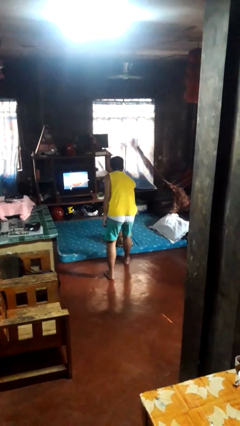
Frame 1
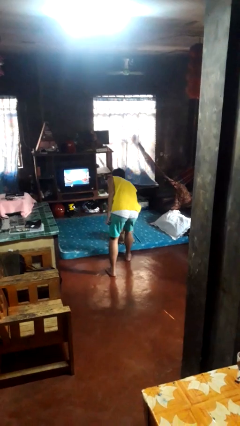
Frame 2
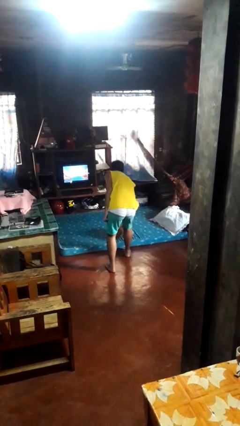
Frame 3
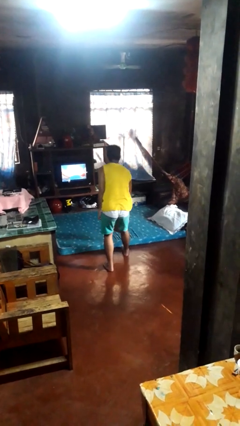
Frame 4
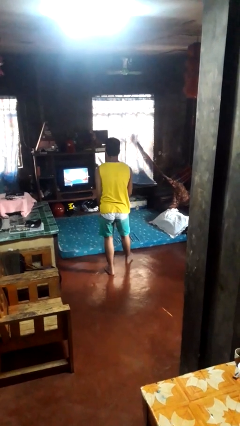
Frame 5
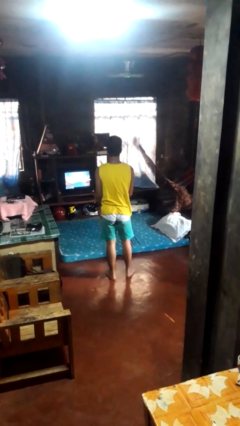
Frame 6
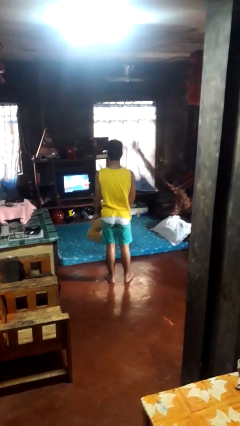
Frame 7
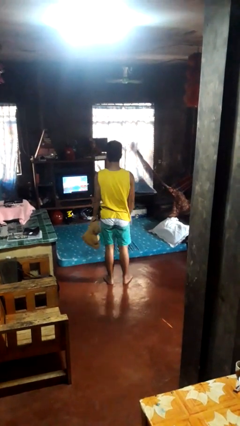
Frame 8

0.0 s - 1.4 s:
person picks up object from bed

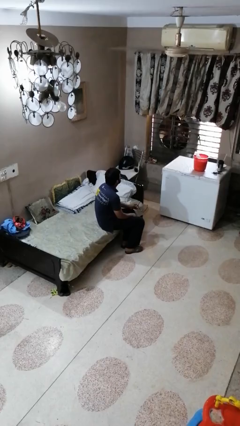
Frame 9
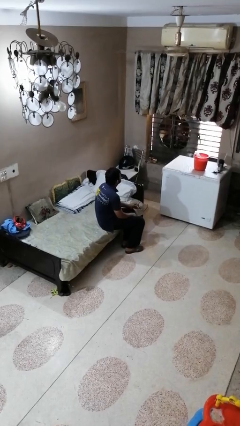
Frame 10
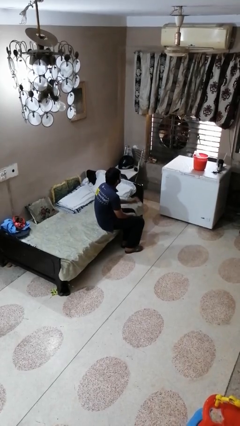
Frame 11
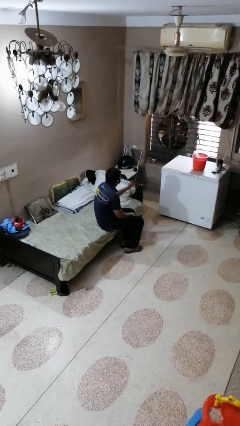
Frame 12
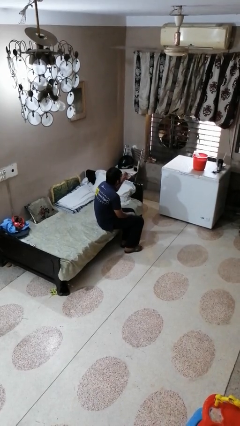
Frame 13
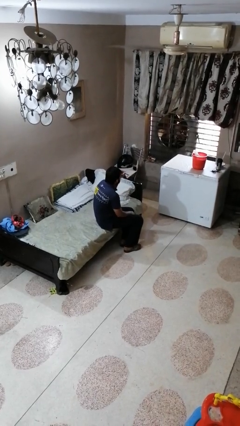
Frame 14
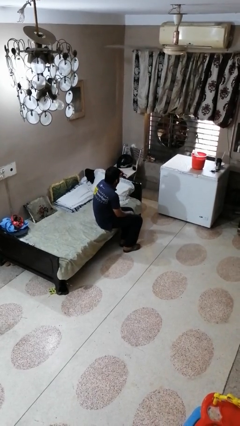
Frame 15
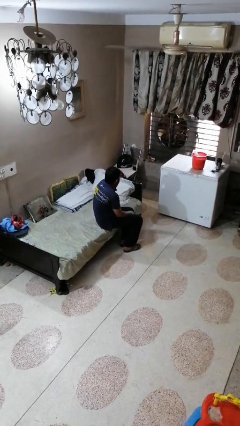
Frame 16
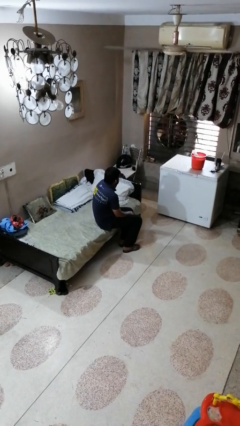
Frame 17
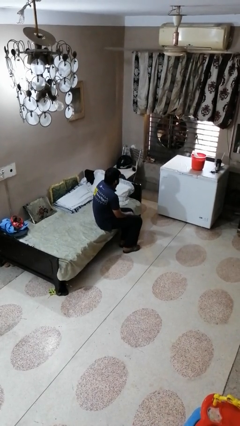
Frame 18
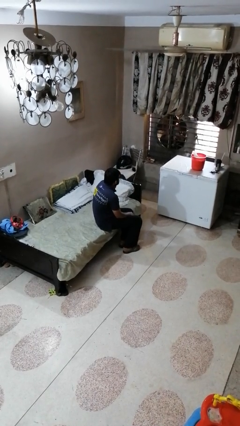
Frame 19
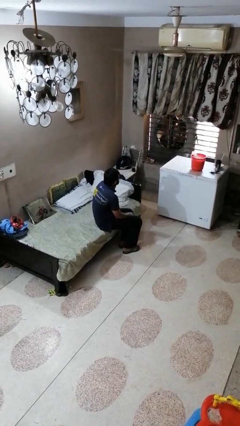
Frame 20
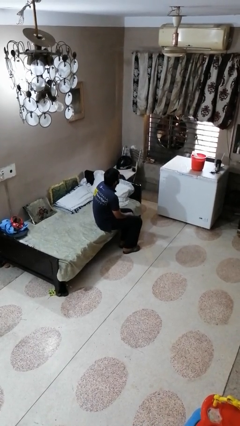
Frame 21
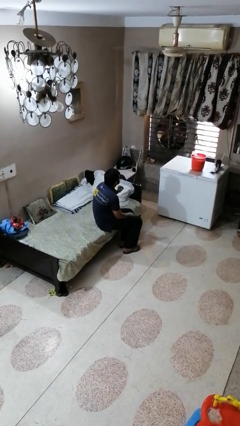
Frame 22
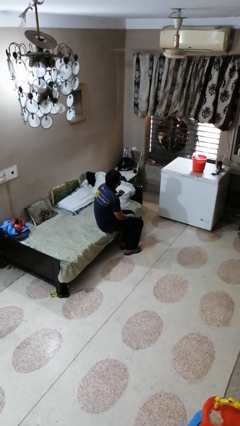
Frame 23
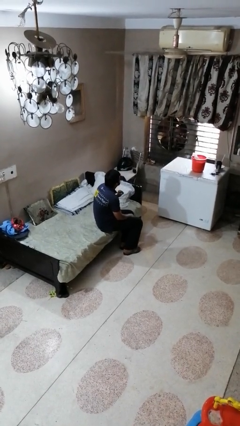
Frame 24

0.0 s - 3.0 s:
person puts on glasses

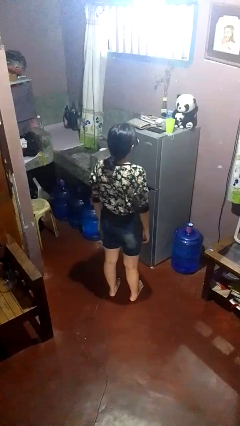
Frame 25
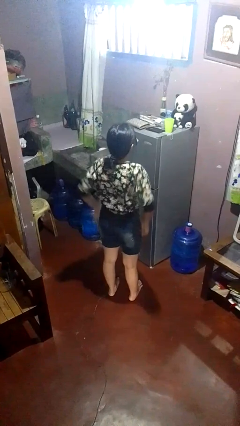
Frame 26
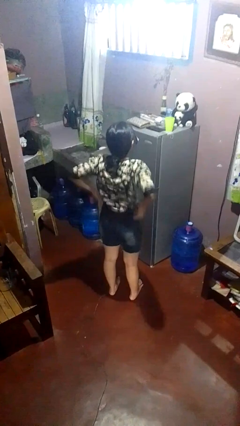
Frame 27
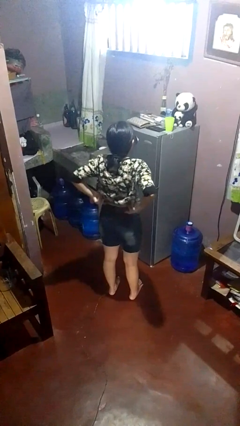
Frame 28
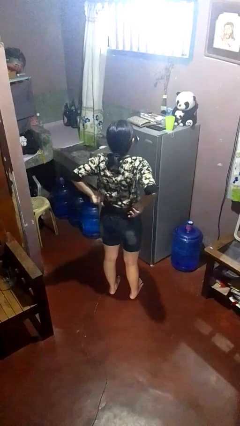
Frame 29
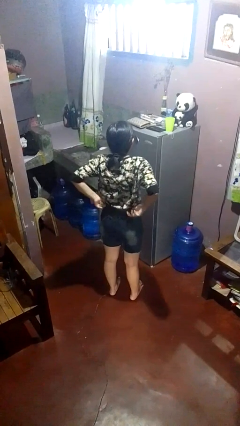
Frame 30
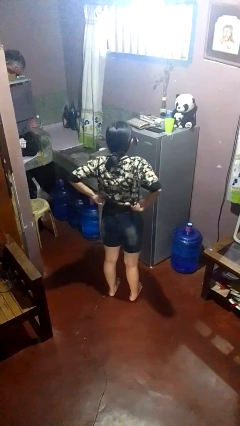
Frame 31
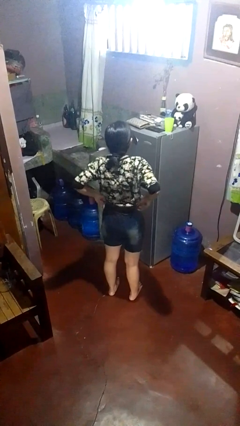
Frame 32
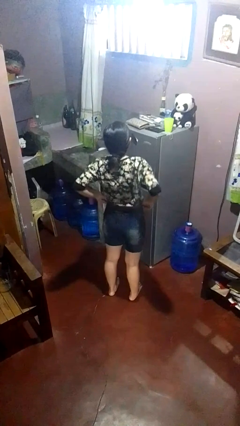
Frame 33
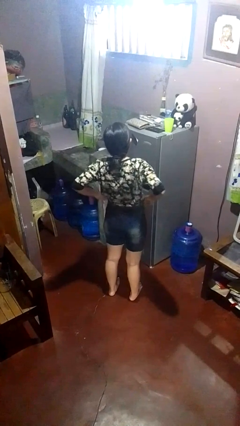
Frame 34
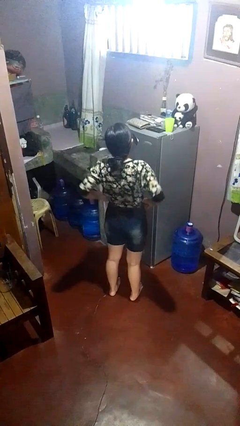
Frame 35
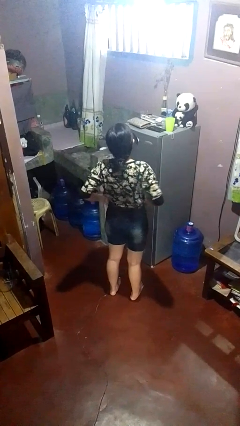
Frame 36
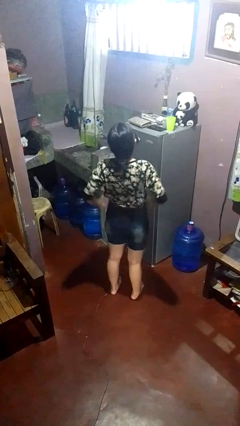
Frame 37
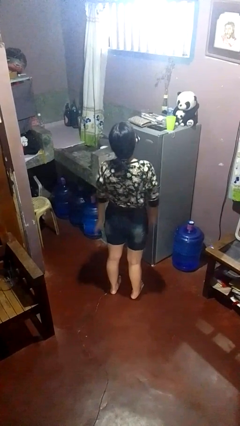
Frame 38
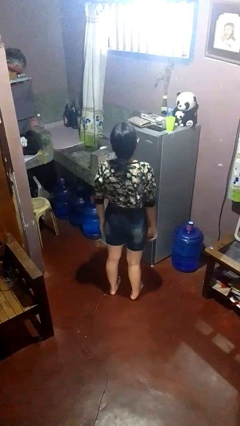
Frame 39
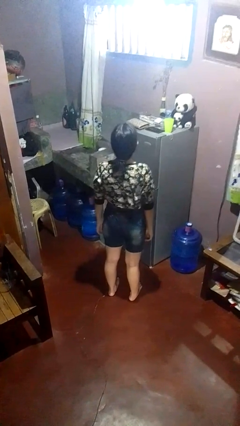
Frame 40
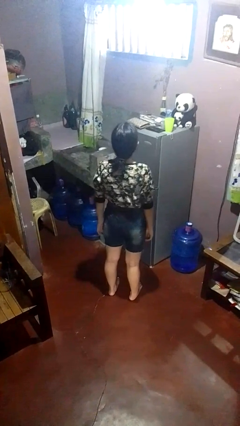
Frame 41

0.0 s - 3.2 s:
person hikes up pants

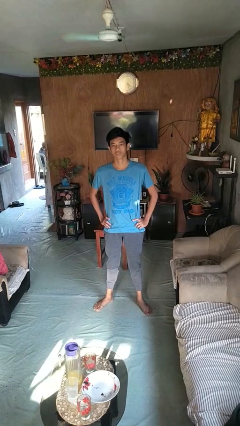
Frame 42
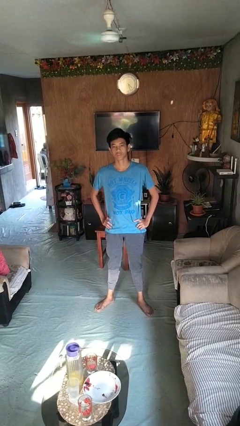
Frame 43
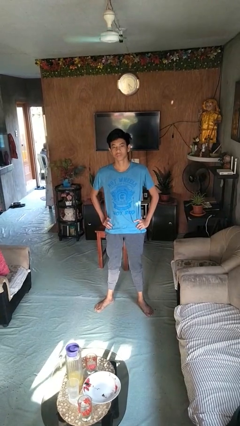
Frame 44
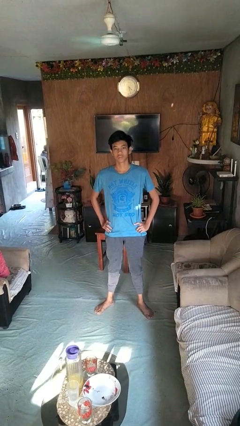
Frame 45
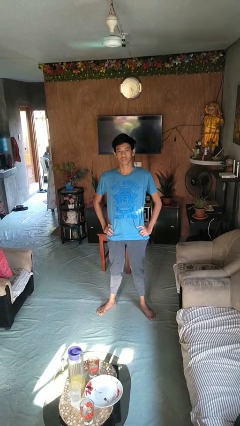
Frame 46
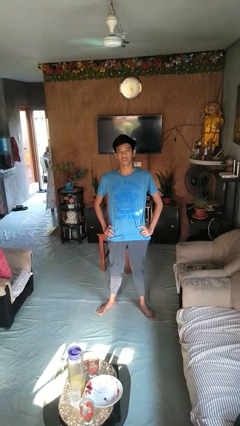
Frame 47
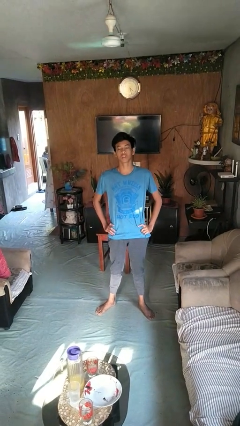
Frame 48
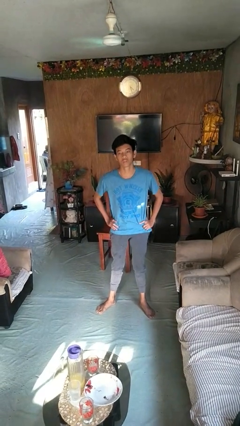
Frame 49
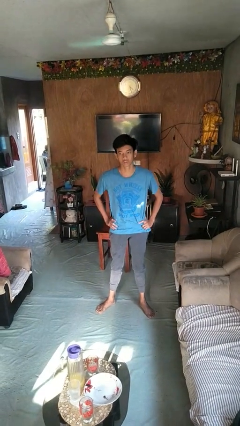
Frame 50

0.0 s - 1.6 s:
person wiggles hips

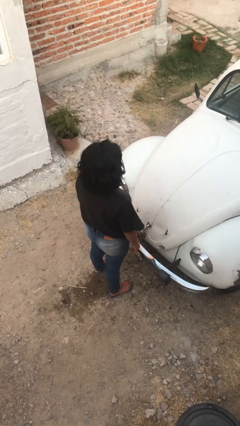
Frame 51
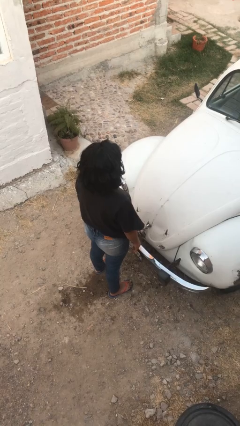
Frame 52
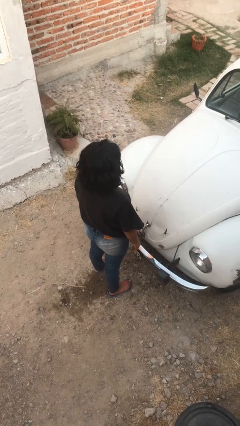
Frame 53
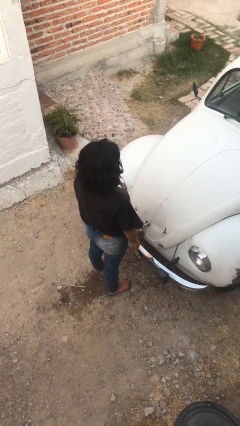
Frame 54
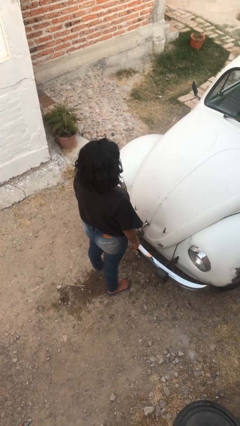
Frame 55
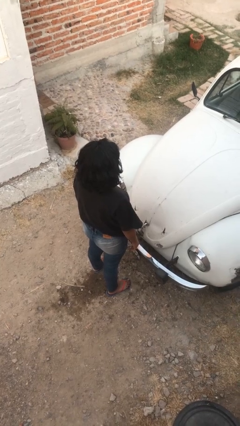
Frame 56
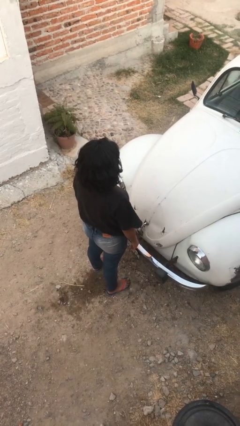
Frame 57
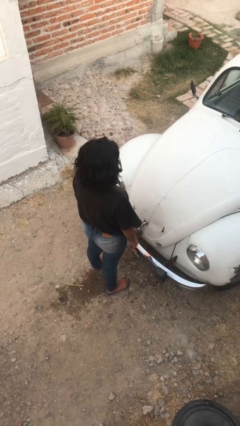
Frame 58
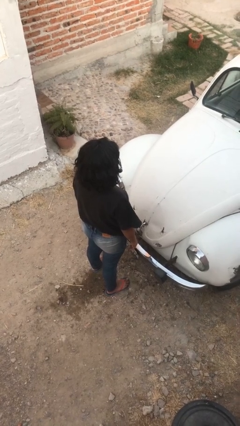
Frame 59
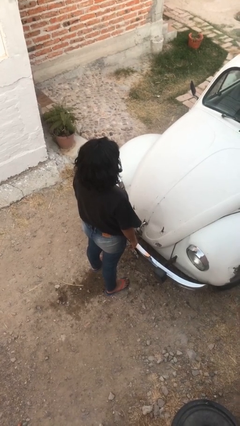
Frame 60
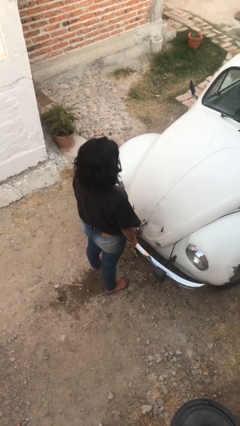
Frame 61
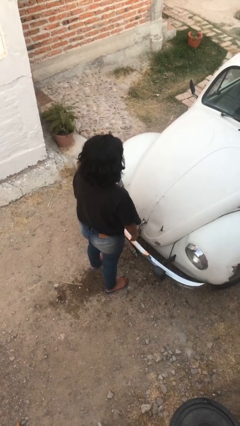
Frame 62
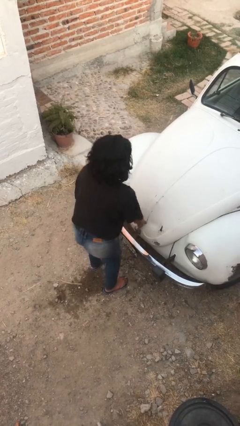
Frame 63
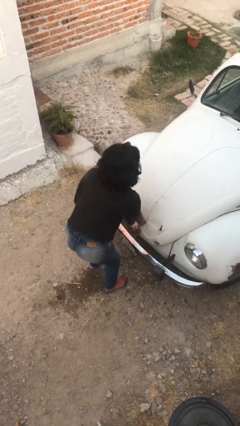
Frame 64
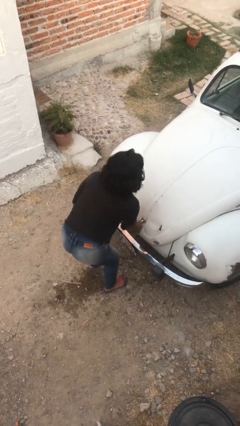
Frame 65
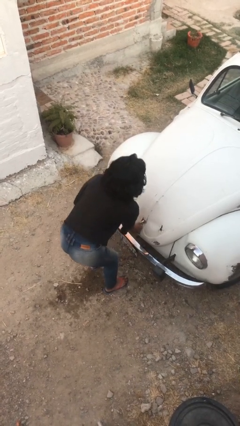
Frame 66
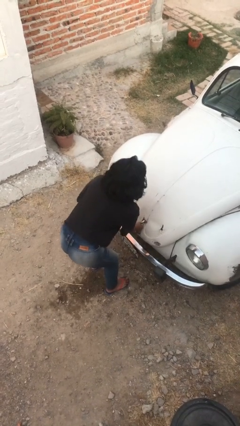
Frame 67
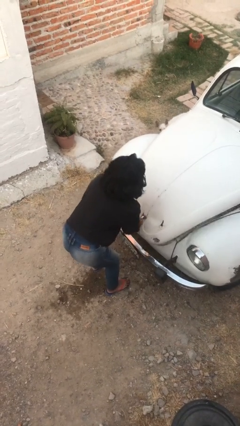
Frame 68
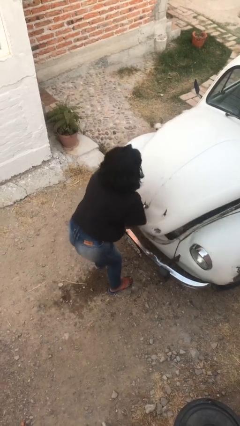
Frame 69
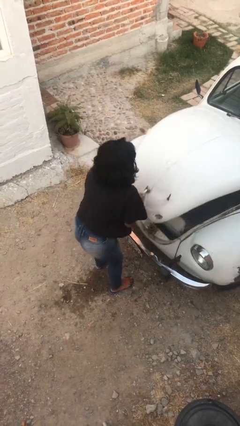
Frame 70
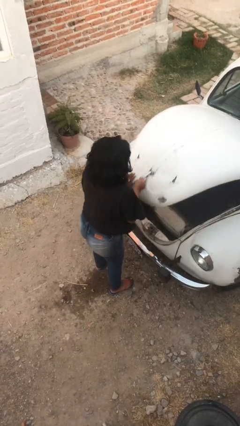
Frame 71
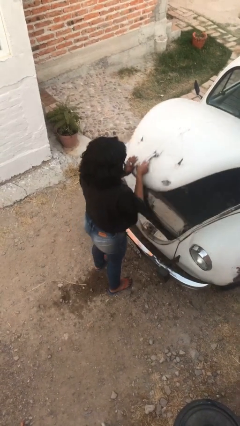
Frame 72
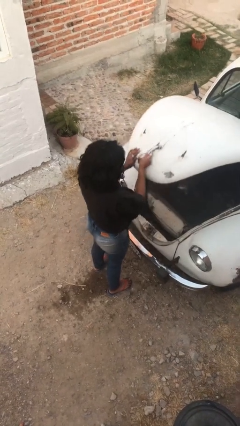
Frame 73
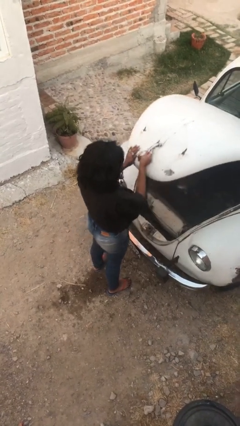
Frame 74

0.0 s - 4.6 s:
person opens car trunk

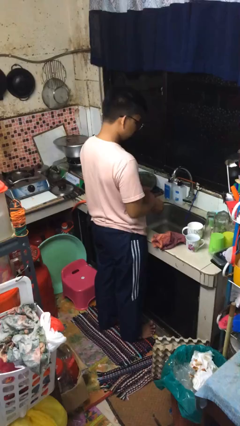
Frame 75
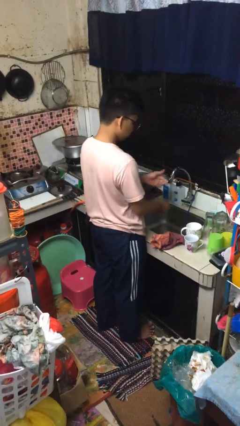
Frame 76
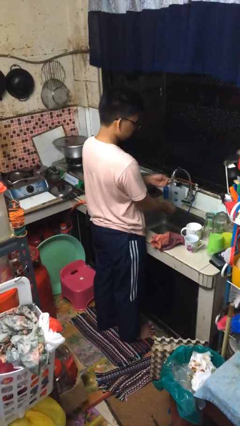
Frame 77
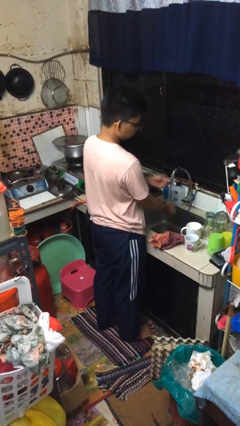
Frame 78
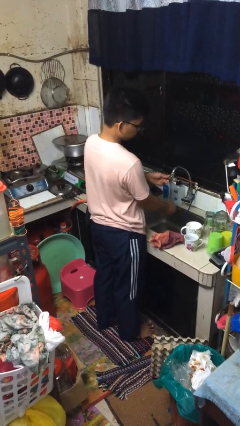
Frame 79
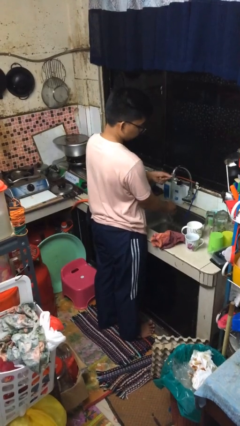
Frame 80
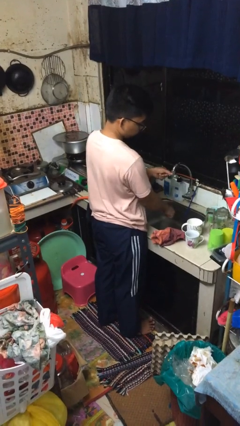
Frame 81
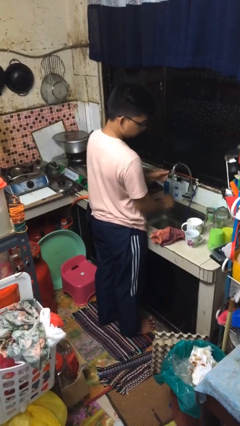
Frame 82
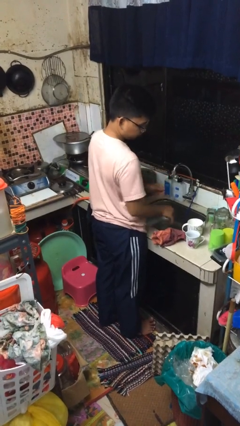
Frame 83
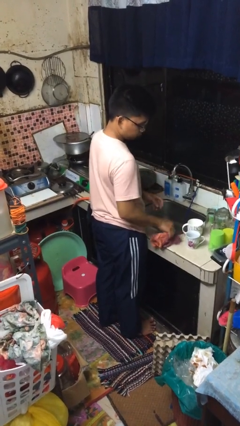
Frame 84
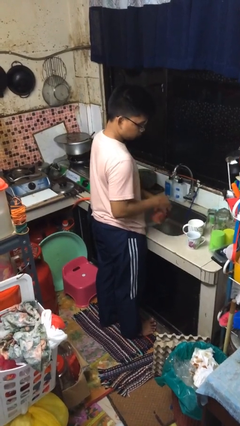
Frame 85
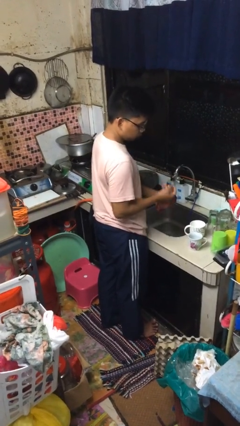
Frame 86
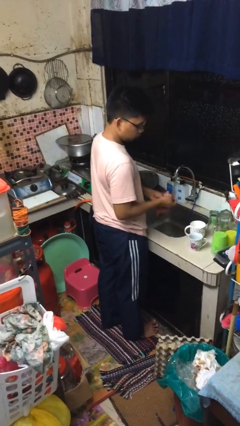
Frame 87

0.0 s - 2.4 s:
person washes hands

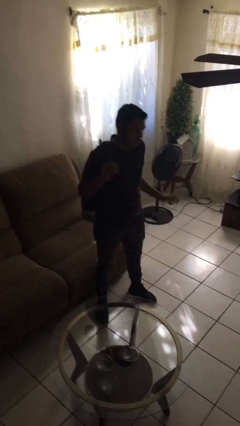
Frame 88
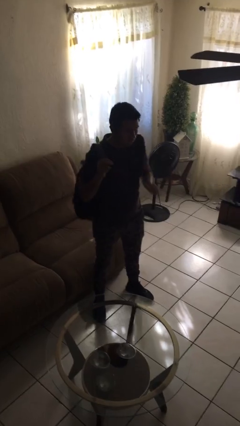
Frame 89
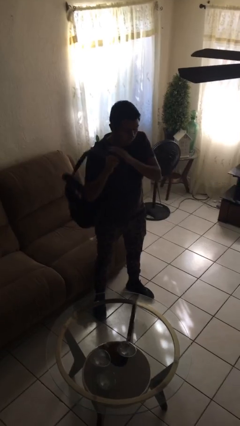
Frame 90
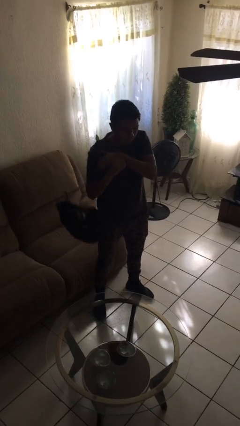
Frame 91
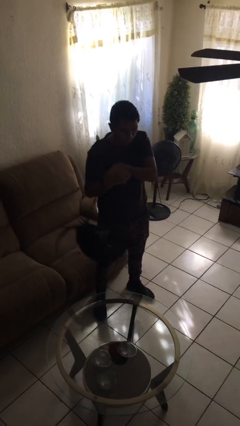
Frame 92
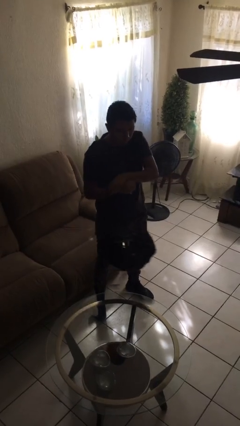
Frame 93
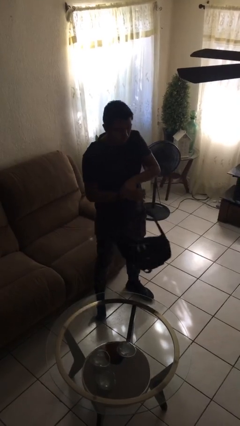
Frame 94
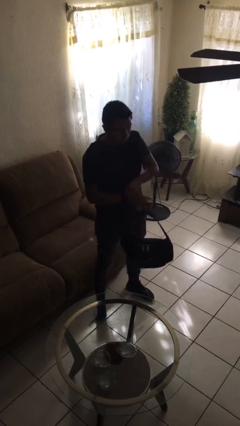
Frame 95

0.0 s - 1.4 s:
person takes off backpack
